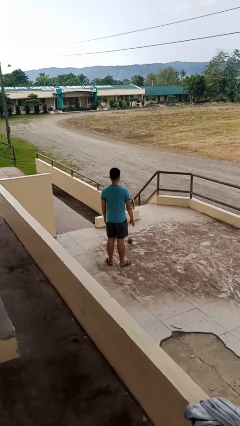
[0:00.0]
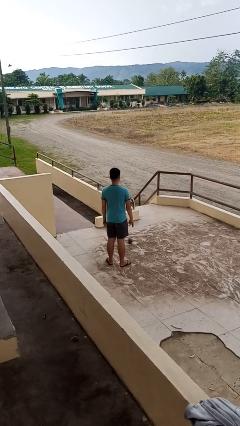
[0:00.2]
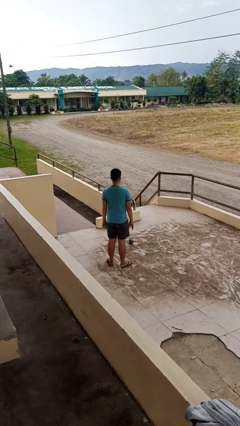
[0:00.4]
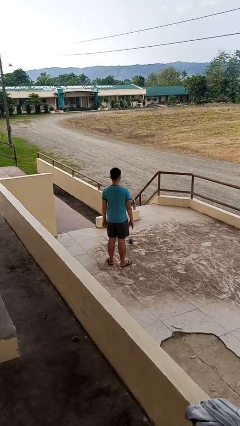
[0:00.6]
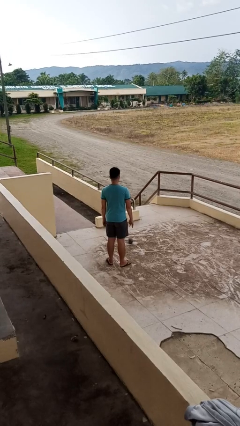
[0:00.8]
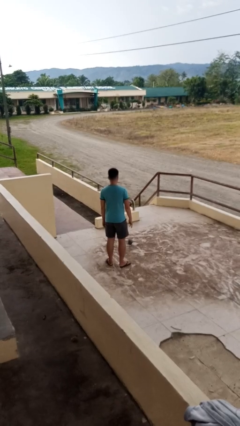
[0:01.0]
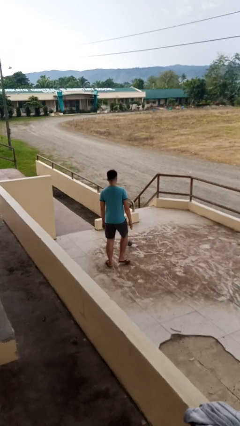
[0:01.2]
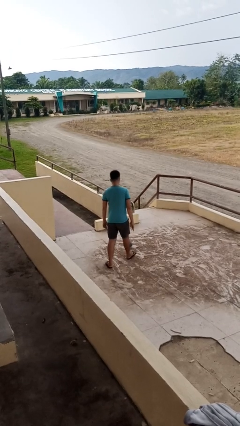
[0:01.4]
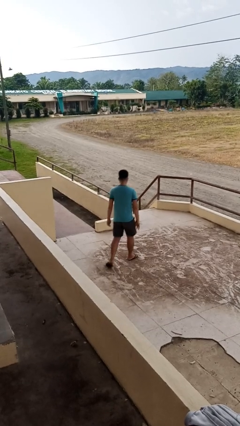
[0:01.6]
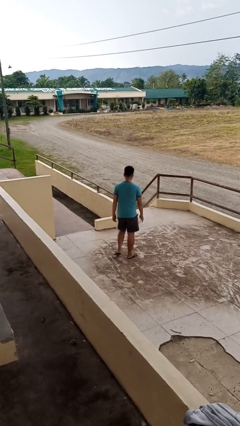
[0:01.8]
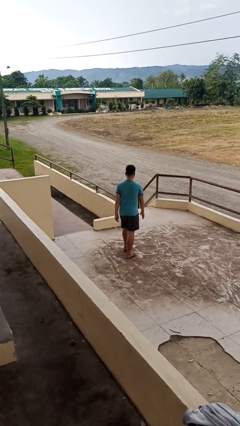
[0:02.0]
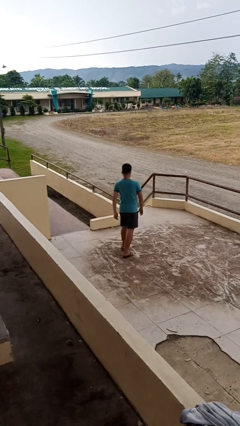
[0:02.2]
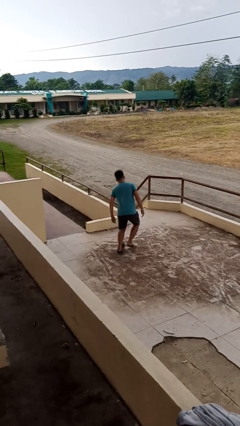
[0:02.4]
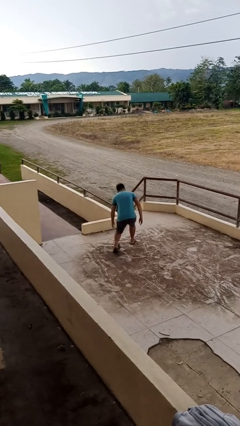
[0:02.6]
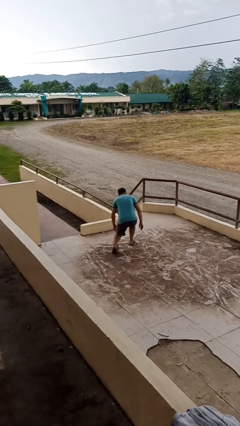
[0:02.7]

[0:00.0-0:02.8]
person trips on object on floor

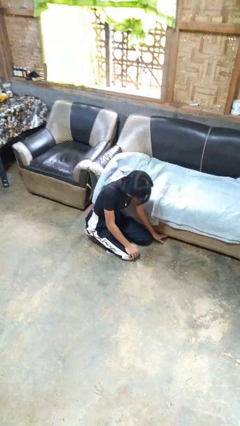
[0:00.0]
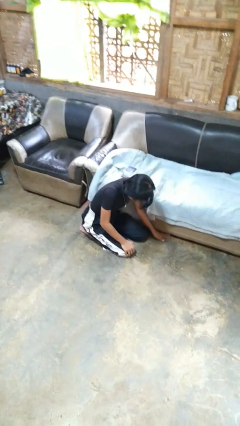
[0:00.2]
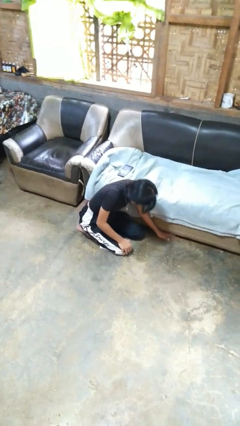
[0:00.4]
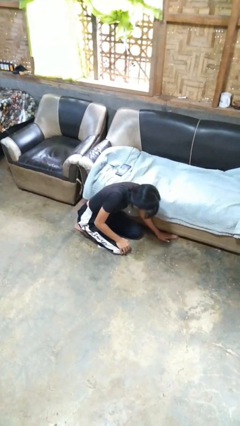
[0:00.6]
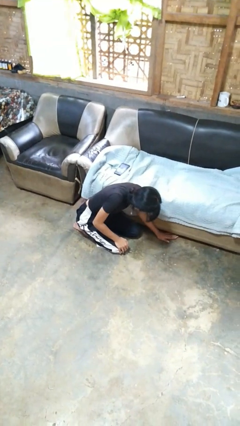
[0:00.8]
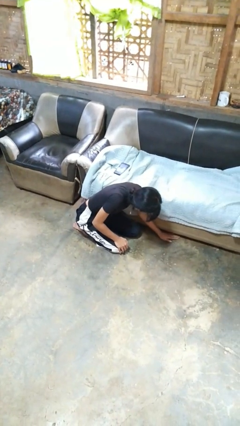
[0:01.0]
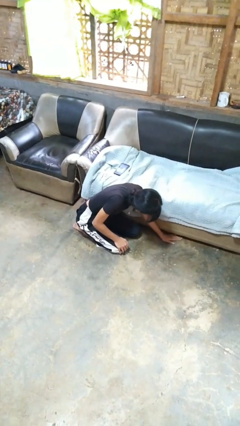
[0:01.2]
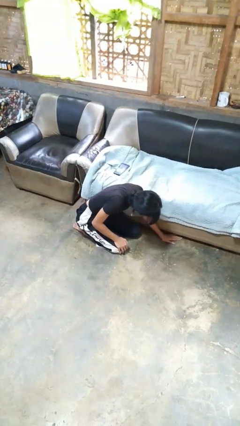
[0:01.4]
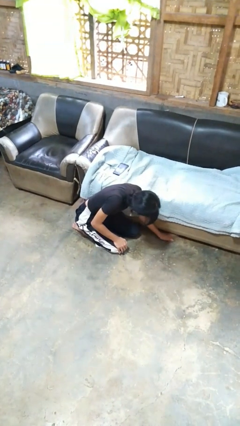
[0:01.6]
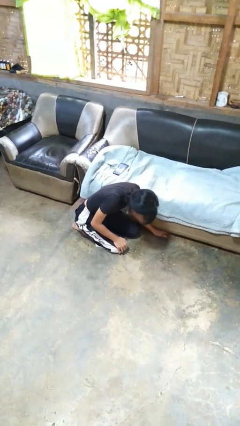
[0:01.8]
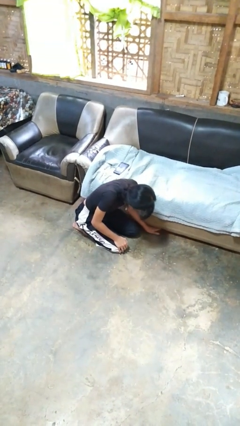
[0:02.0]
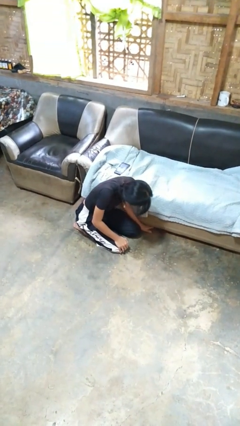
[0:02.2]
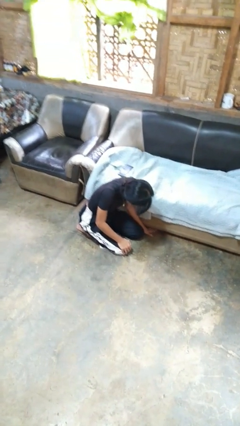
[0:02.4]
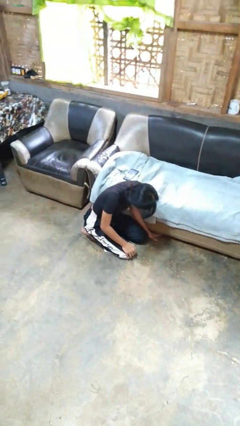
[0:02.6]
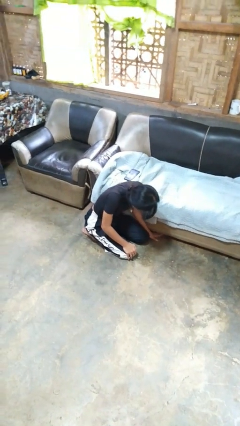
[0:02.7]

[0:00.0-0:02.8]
person searches under couch

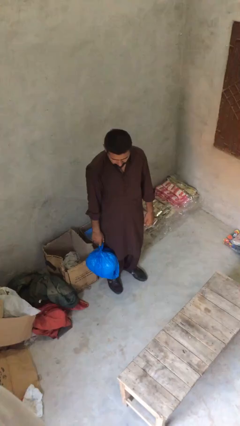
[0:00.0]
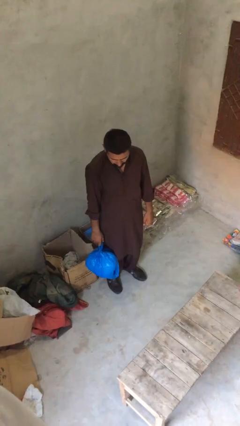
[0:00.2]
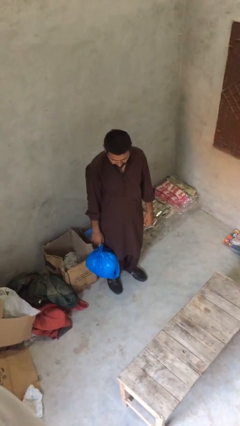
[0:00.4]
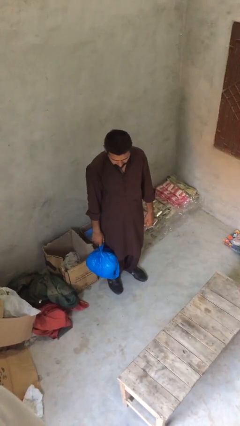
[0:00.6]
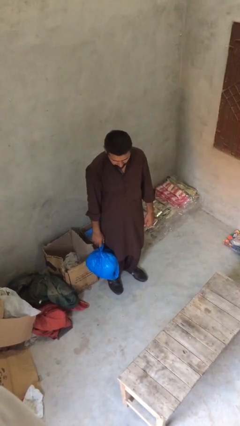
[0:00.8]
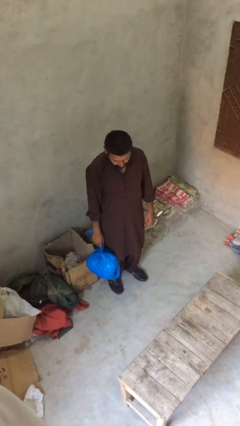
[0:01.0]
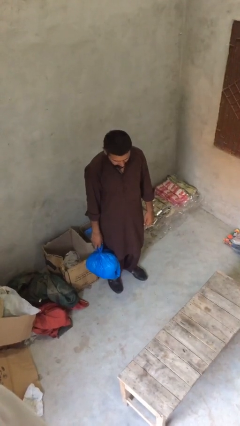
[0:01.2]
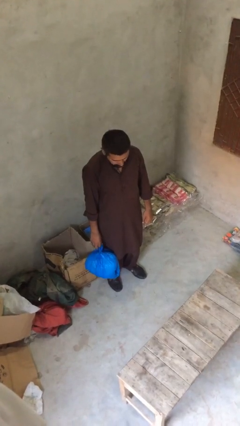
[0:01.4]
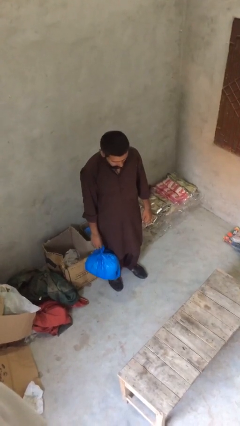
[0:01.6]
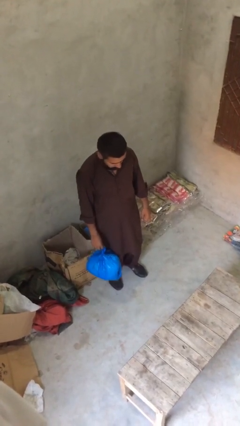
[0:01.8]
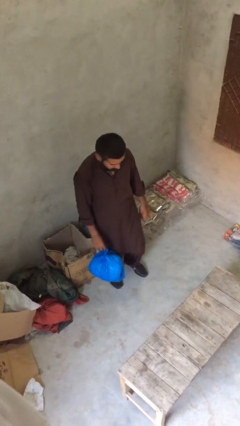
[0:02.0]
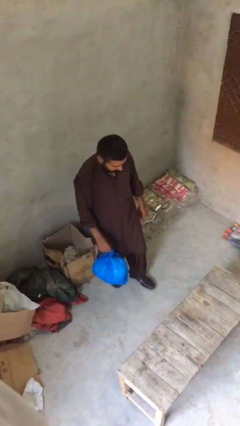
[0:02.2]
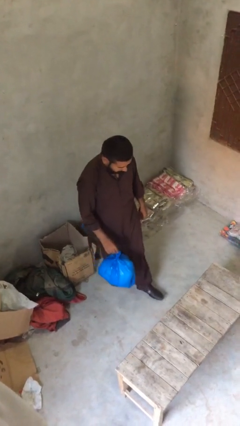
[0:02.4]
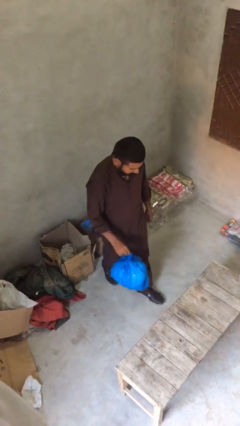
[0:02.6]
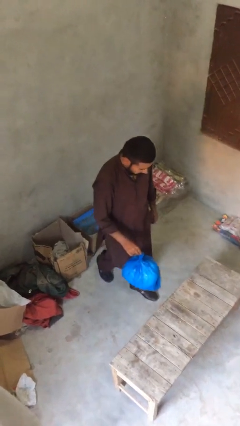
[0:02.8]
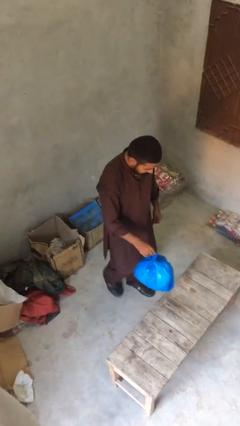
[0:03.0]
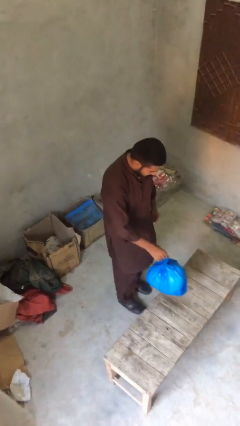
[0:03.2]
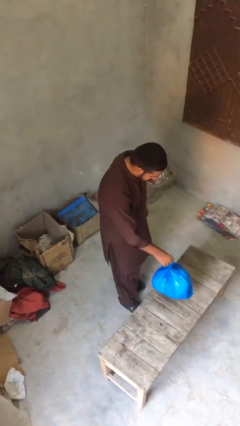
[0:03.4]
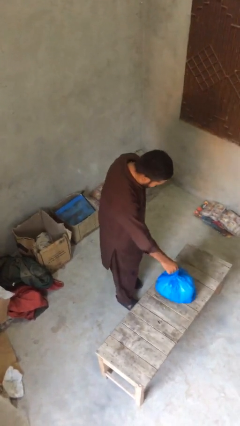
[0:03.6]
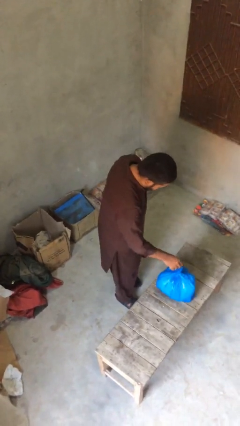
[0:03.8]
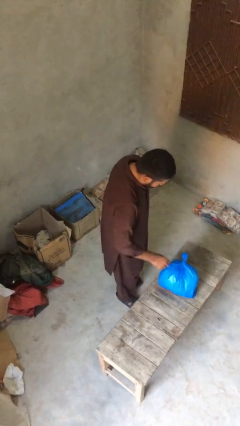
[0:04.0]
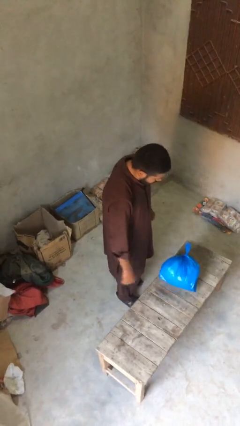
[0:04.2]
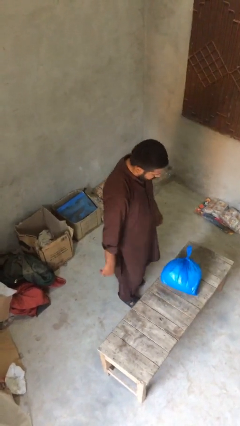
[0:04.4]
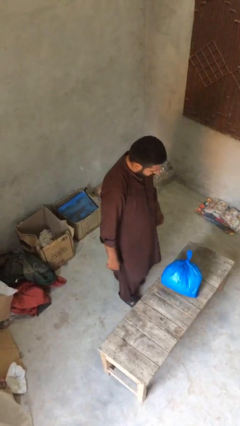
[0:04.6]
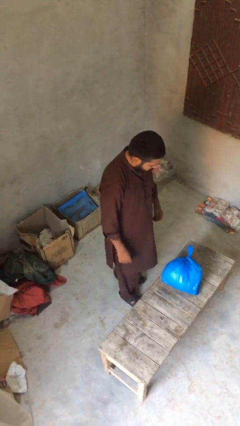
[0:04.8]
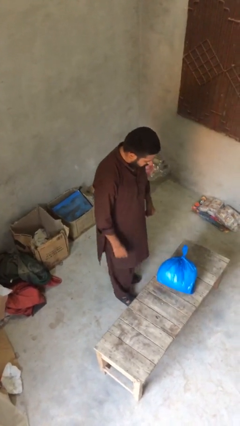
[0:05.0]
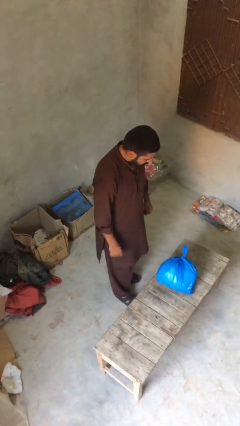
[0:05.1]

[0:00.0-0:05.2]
person puts down object on table

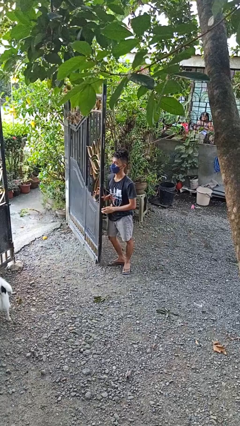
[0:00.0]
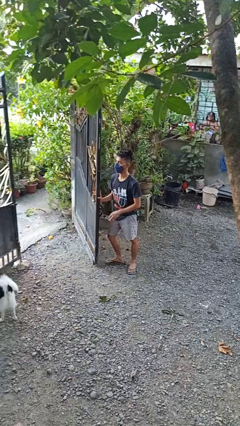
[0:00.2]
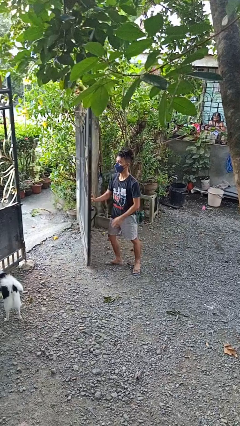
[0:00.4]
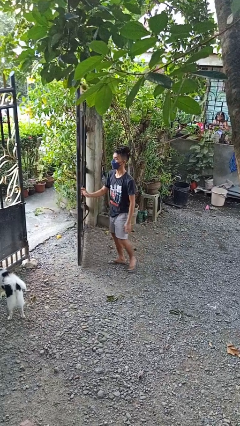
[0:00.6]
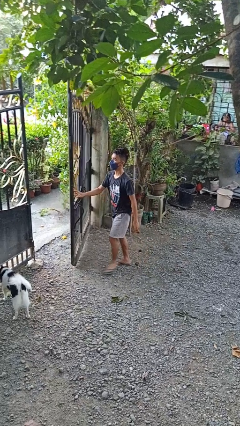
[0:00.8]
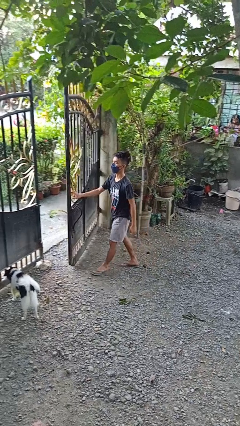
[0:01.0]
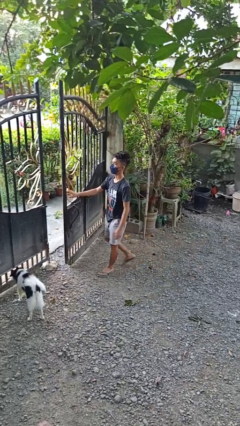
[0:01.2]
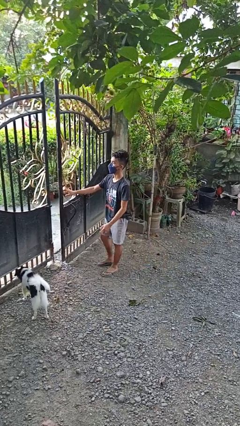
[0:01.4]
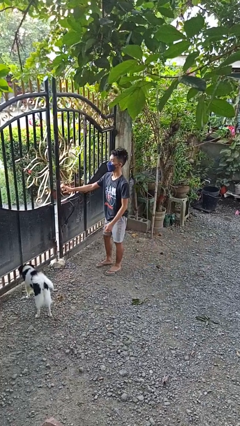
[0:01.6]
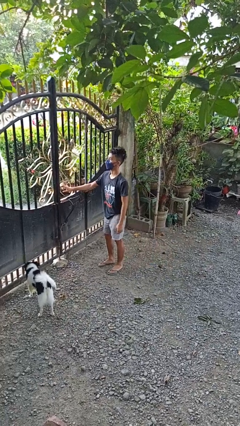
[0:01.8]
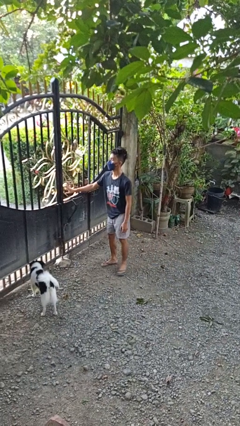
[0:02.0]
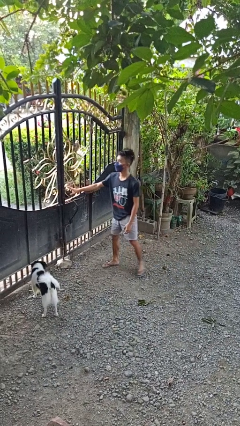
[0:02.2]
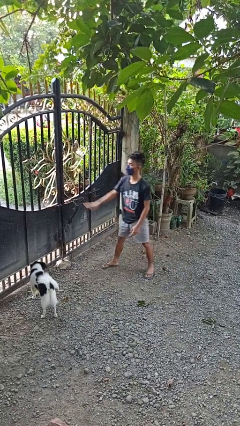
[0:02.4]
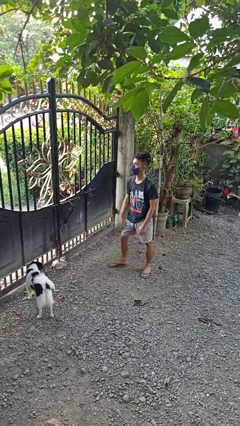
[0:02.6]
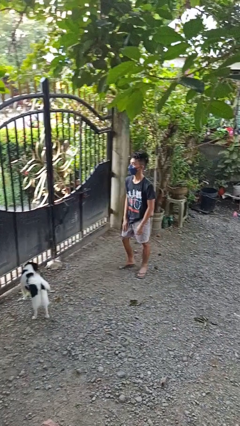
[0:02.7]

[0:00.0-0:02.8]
person closes gate

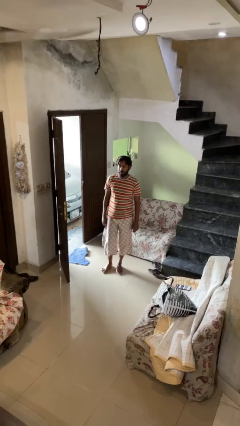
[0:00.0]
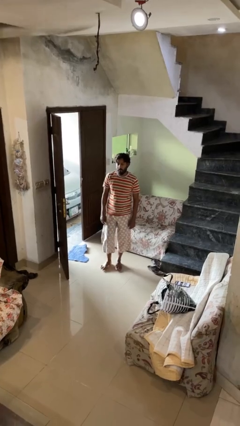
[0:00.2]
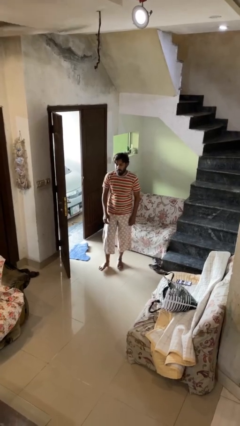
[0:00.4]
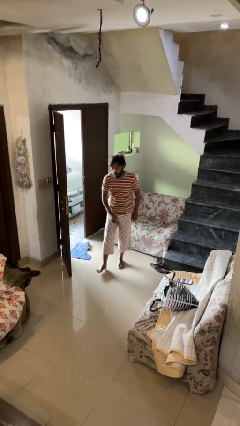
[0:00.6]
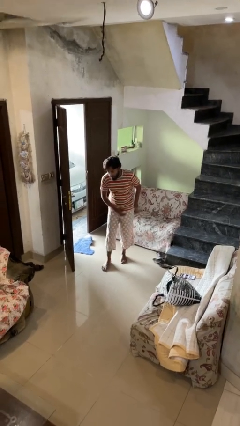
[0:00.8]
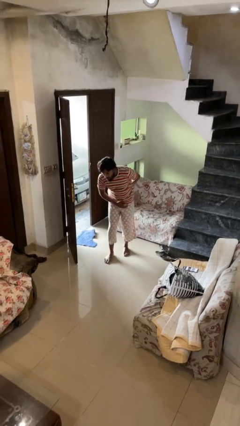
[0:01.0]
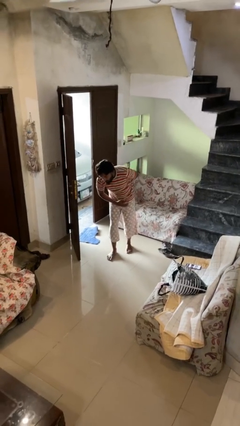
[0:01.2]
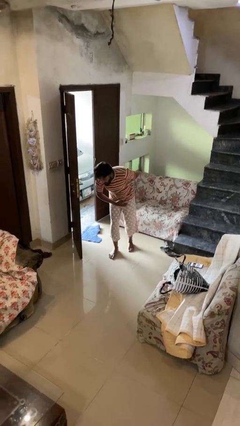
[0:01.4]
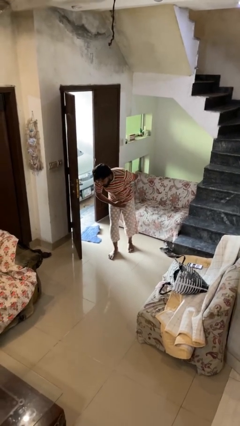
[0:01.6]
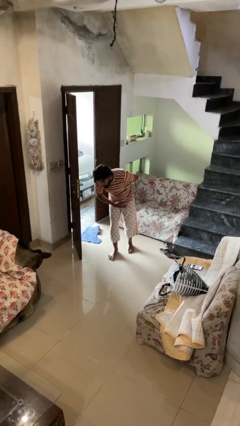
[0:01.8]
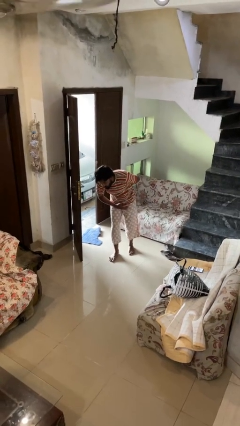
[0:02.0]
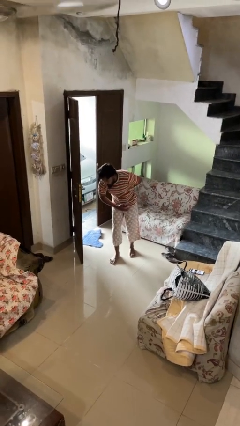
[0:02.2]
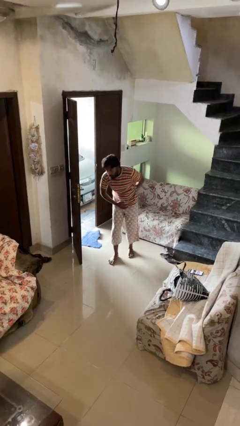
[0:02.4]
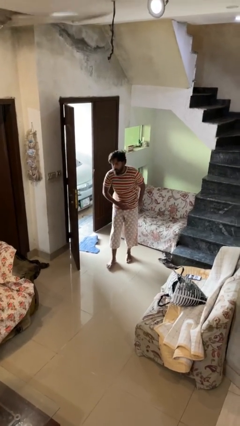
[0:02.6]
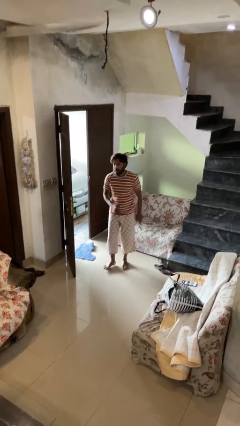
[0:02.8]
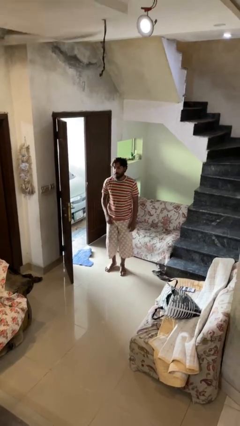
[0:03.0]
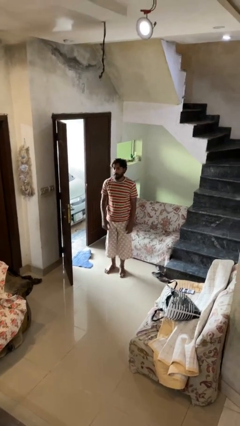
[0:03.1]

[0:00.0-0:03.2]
person bows

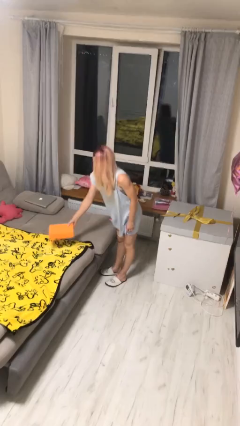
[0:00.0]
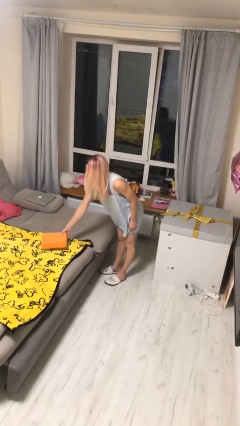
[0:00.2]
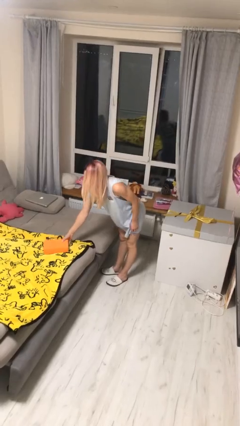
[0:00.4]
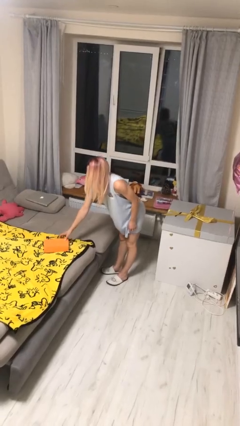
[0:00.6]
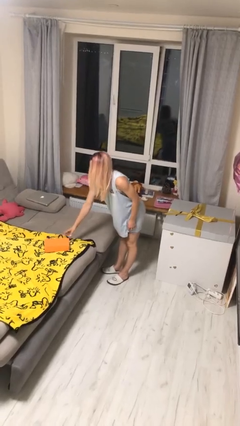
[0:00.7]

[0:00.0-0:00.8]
person puts down object on bed

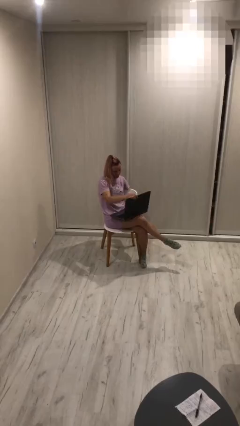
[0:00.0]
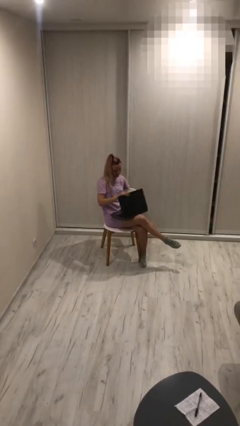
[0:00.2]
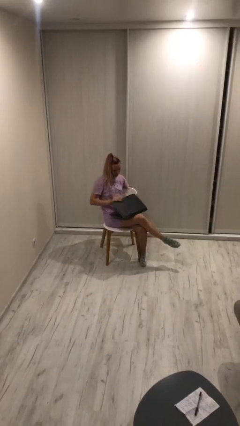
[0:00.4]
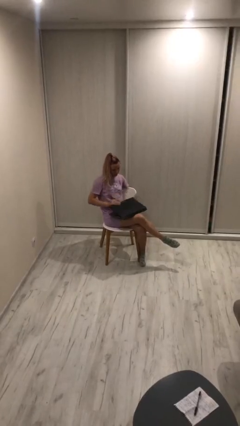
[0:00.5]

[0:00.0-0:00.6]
person closes laptop
